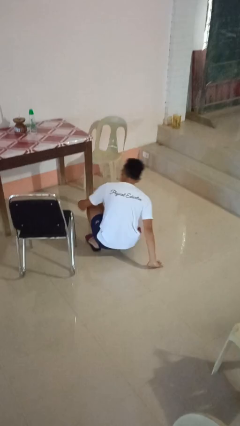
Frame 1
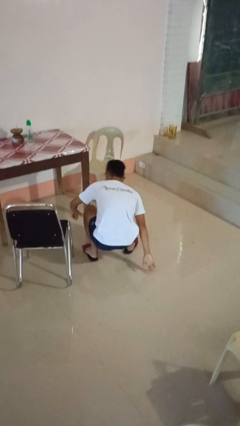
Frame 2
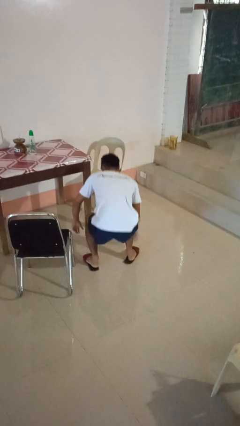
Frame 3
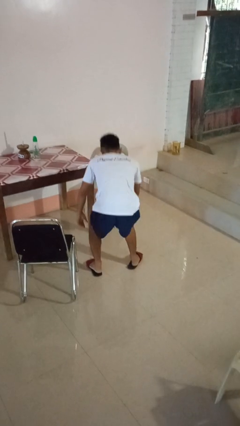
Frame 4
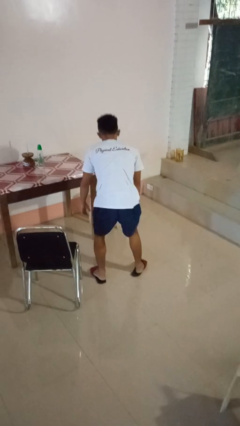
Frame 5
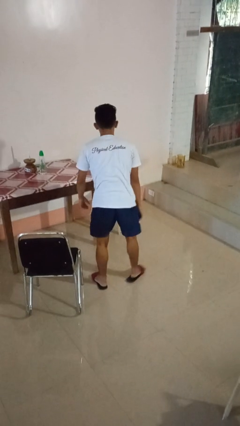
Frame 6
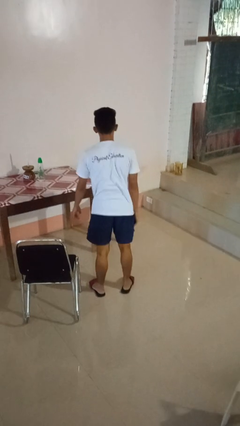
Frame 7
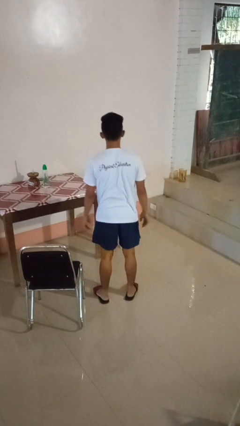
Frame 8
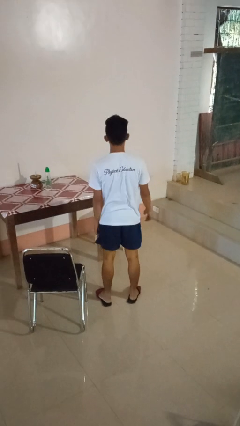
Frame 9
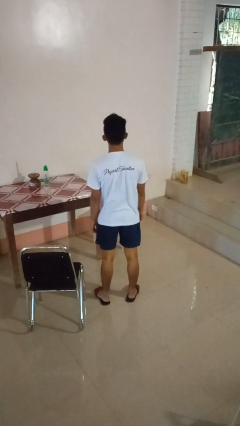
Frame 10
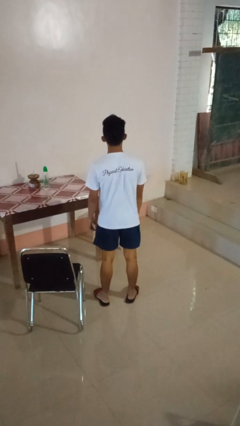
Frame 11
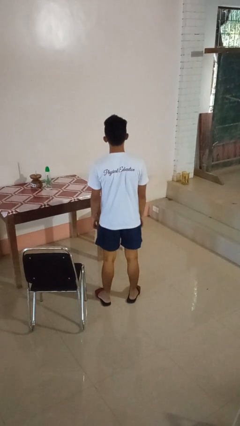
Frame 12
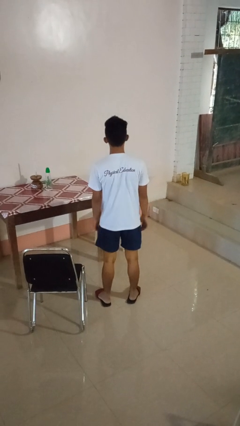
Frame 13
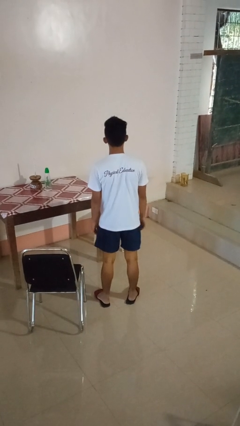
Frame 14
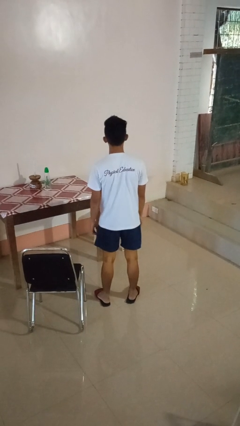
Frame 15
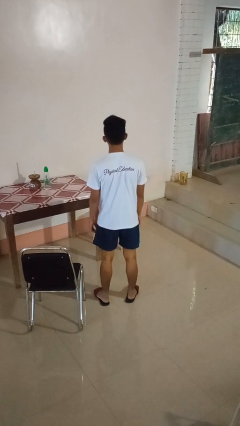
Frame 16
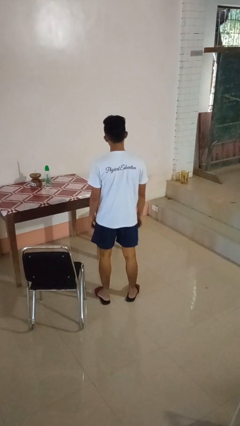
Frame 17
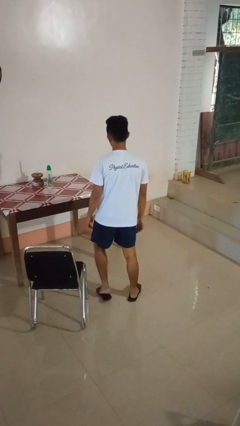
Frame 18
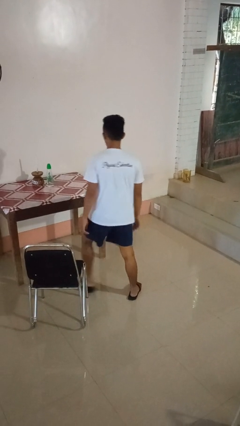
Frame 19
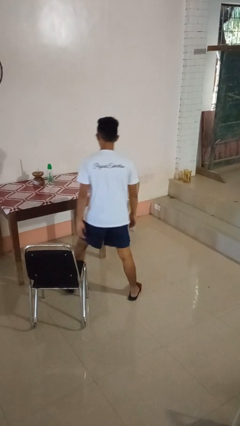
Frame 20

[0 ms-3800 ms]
person stands up from floor

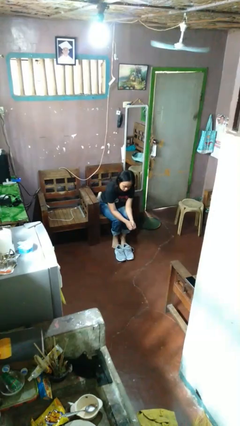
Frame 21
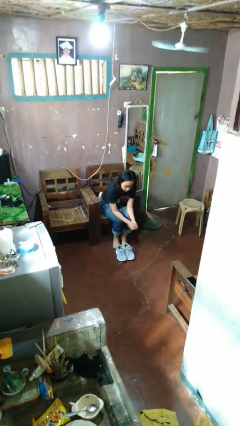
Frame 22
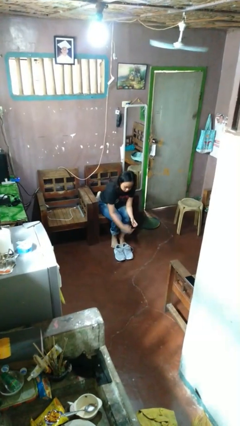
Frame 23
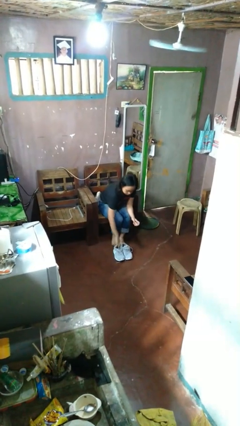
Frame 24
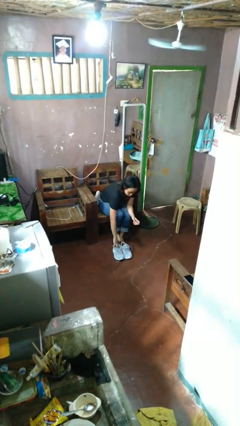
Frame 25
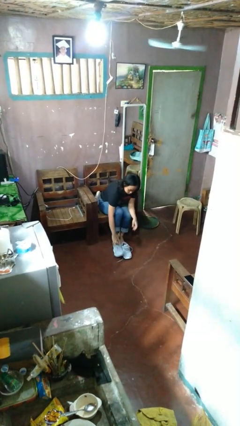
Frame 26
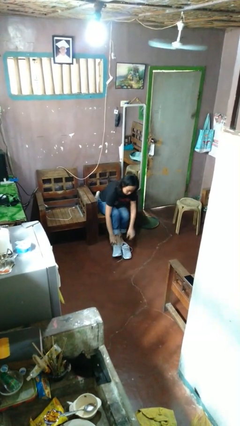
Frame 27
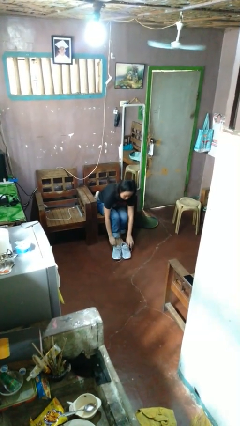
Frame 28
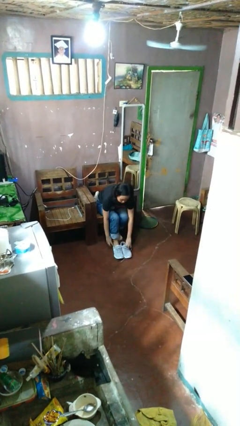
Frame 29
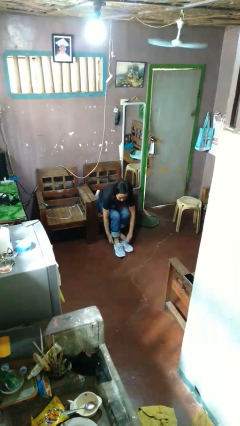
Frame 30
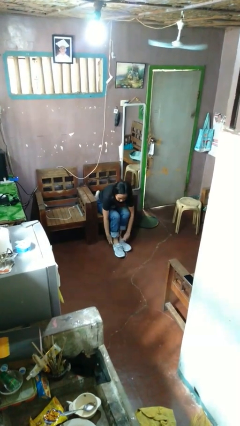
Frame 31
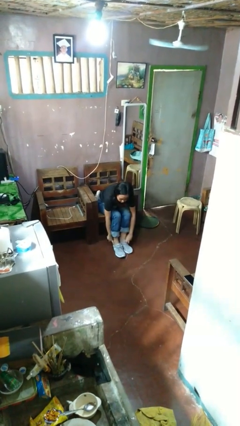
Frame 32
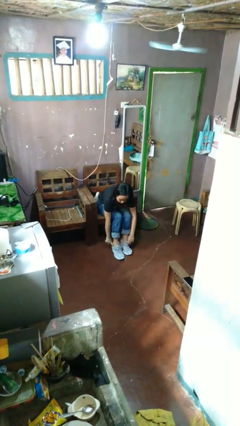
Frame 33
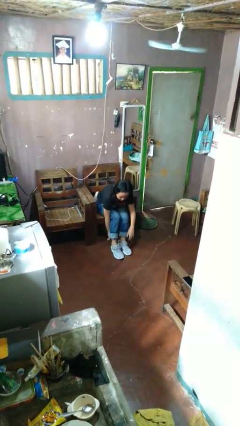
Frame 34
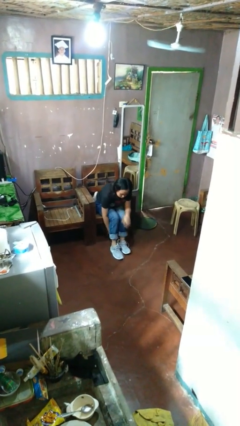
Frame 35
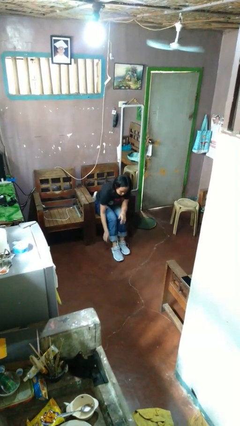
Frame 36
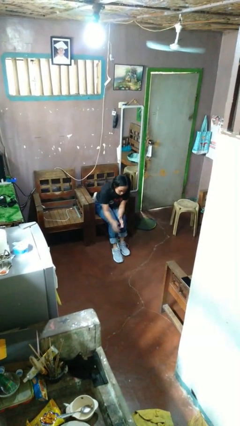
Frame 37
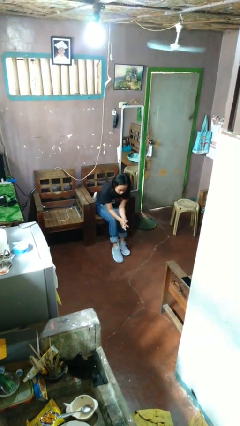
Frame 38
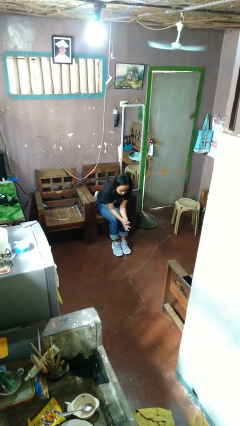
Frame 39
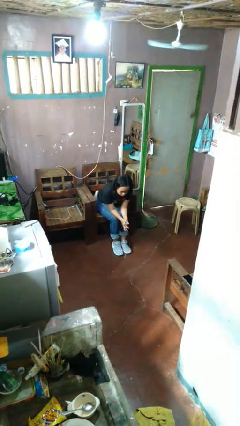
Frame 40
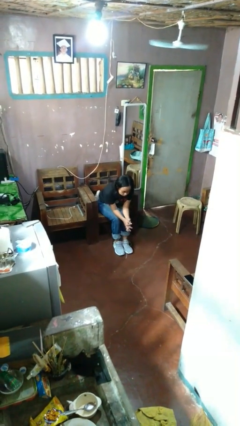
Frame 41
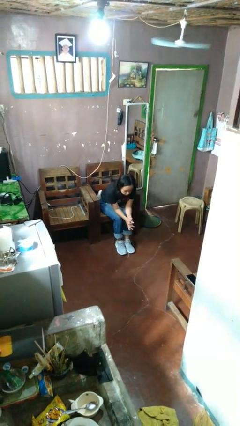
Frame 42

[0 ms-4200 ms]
person puts on shoes

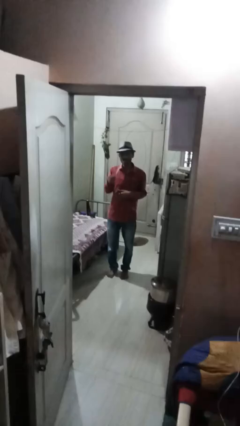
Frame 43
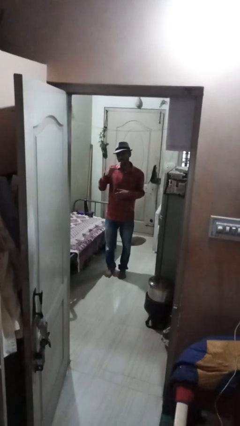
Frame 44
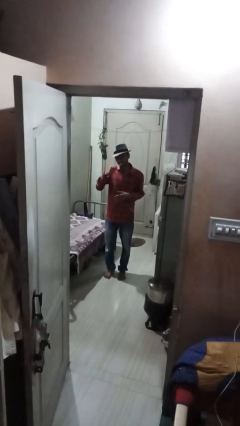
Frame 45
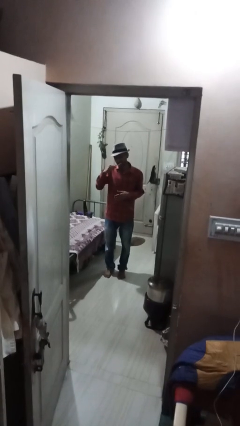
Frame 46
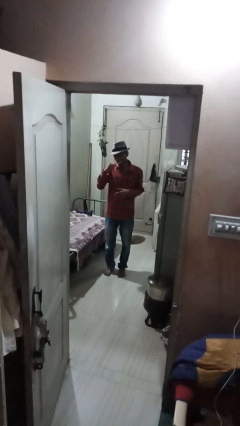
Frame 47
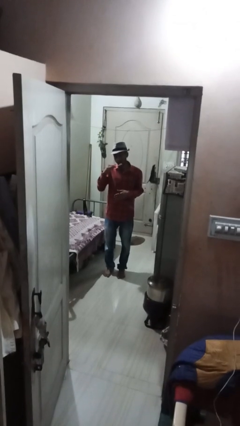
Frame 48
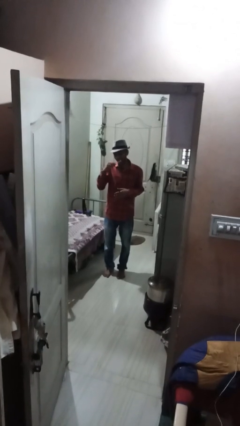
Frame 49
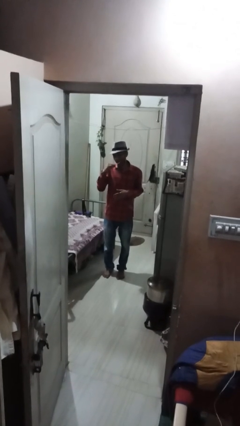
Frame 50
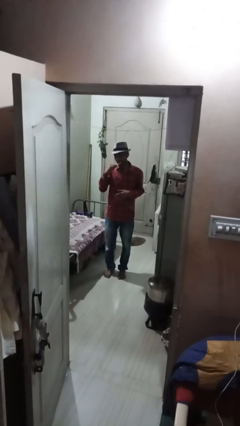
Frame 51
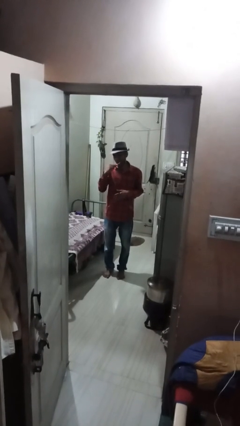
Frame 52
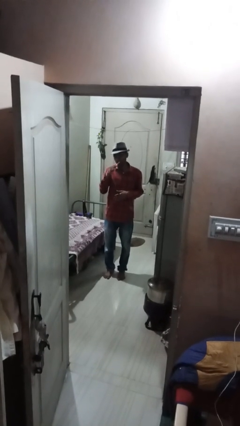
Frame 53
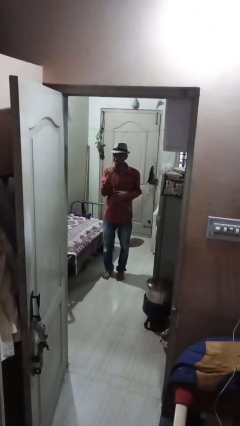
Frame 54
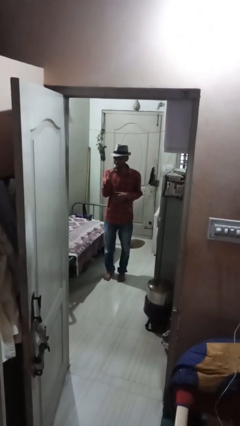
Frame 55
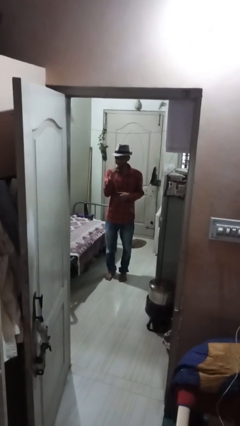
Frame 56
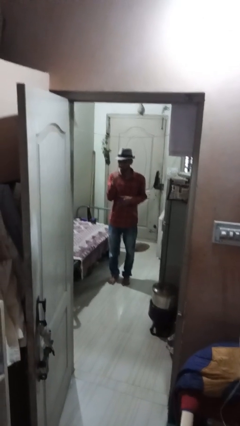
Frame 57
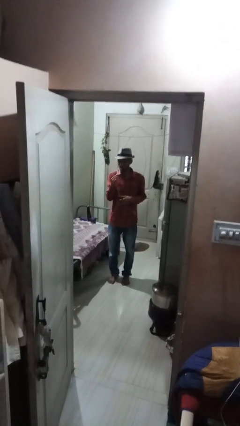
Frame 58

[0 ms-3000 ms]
person brushes teeth

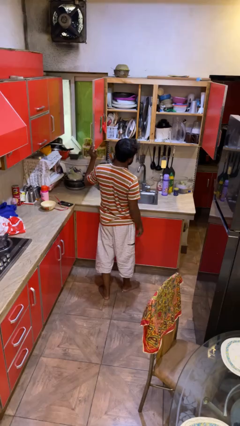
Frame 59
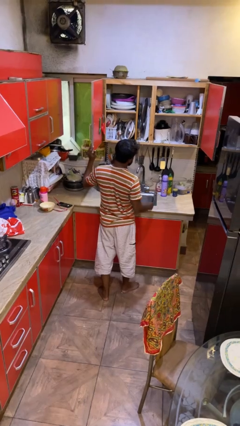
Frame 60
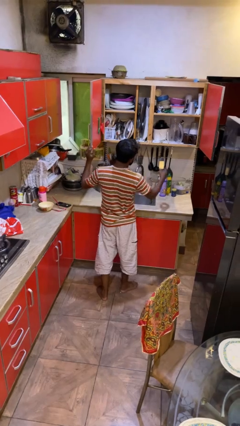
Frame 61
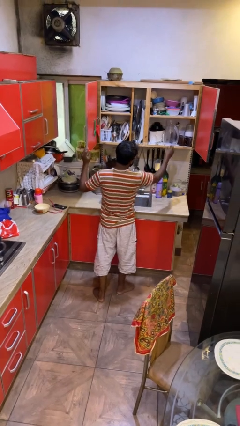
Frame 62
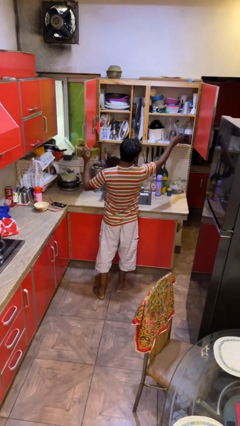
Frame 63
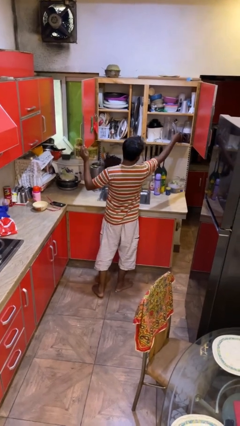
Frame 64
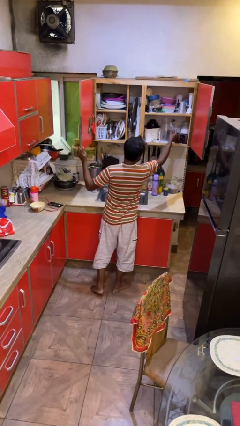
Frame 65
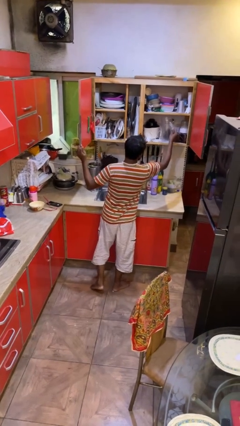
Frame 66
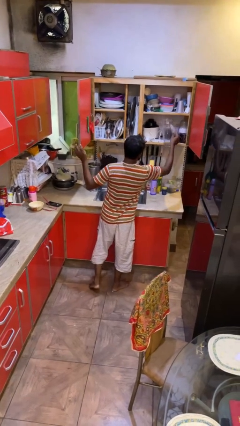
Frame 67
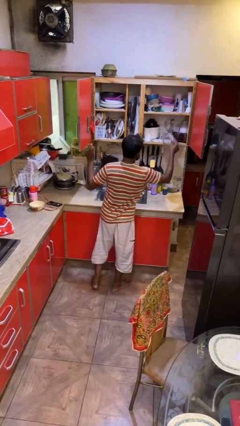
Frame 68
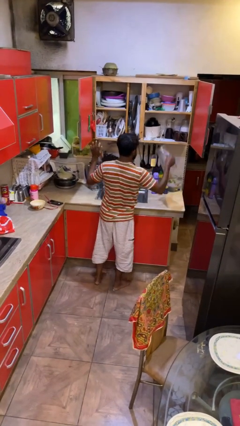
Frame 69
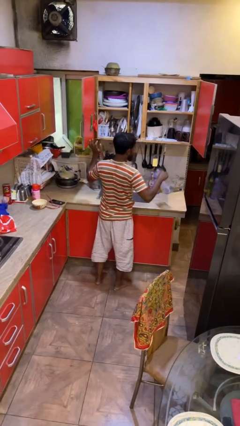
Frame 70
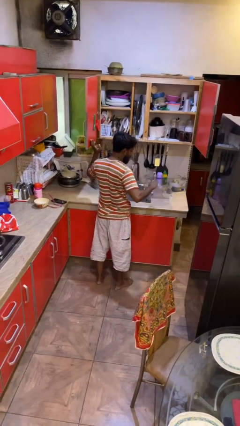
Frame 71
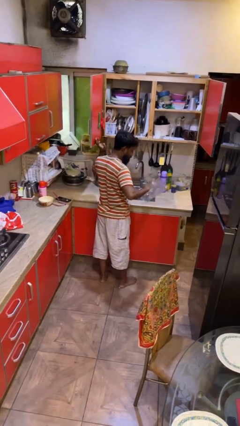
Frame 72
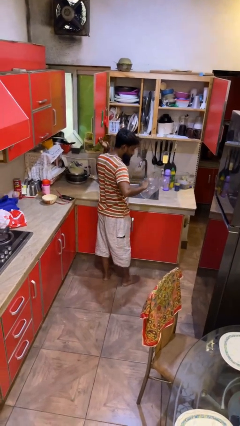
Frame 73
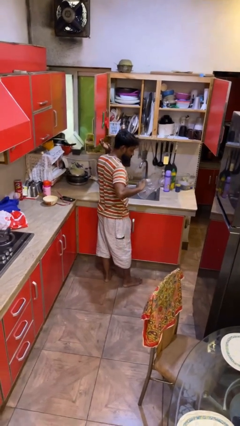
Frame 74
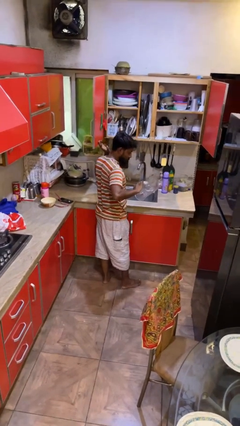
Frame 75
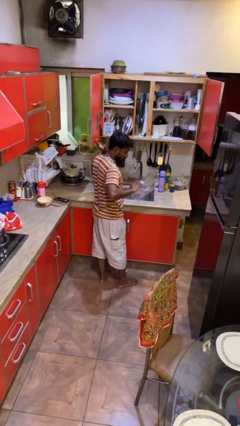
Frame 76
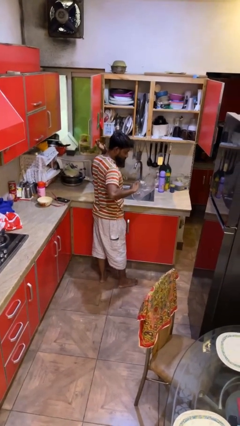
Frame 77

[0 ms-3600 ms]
person picks up object from cabinet

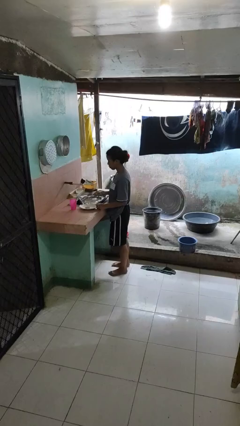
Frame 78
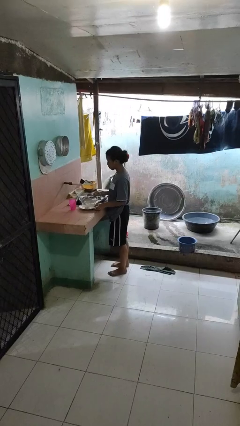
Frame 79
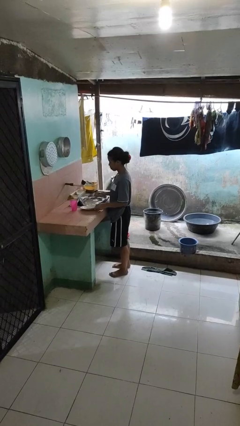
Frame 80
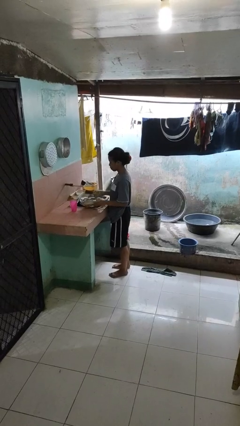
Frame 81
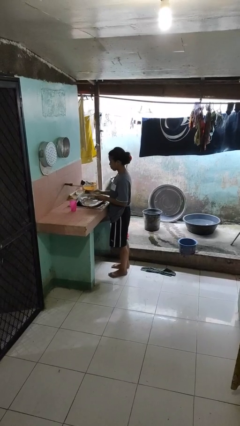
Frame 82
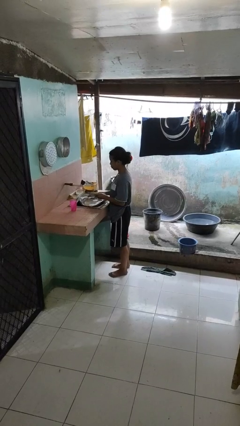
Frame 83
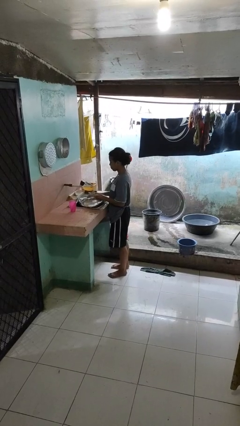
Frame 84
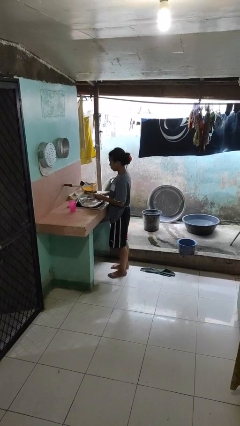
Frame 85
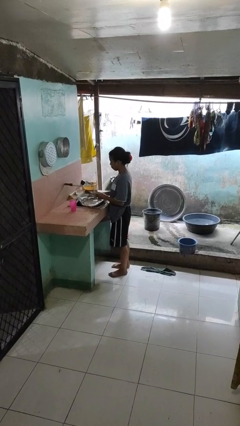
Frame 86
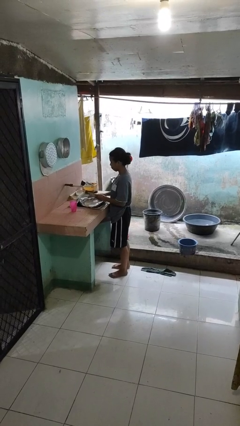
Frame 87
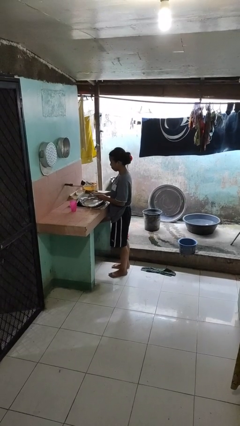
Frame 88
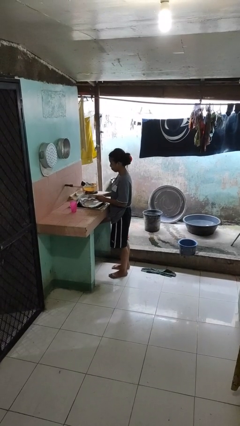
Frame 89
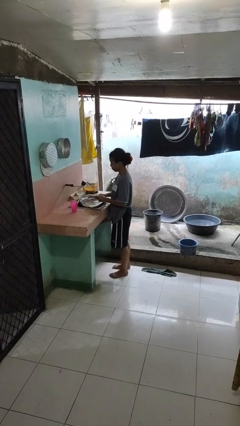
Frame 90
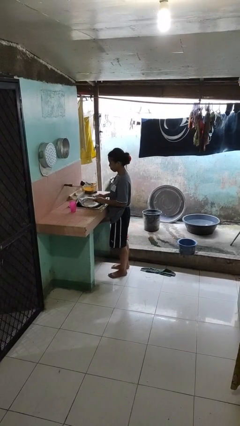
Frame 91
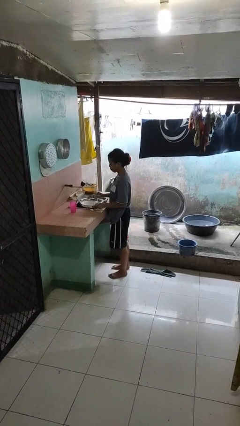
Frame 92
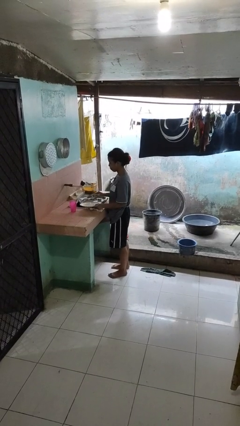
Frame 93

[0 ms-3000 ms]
person washes dish

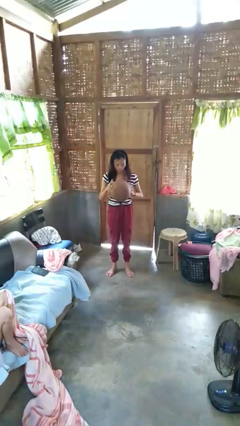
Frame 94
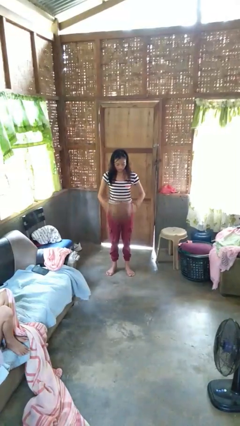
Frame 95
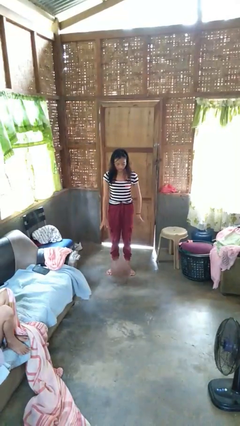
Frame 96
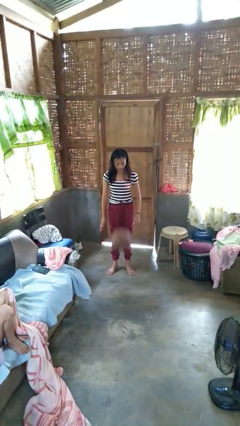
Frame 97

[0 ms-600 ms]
person bounces ball on floor
